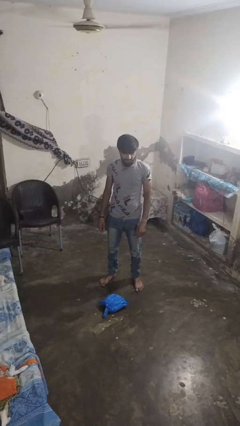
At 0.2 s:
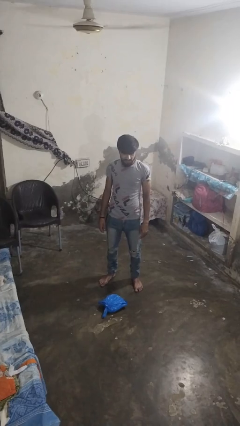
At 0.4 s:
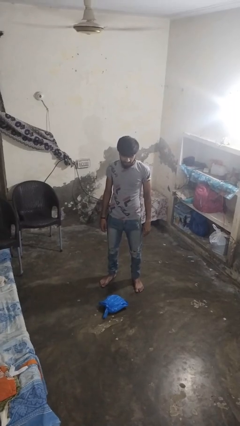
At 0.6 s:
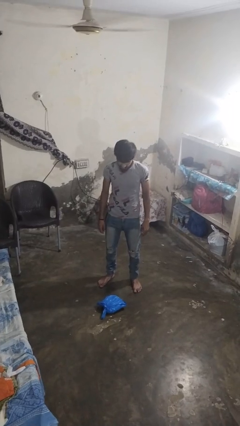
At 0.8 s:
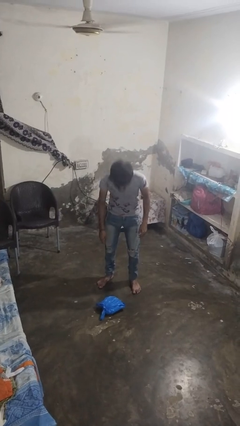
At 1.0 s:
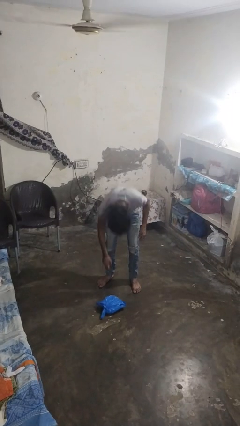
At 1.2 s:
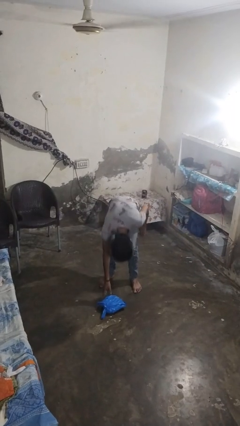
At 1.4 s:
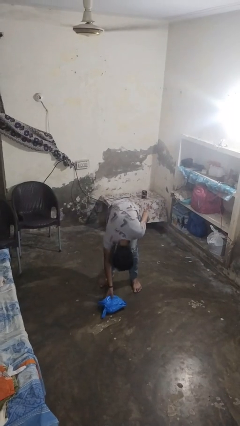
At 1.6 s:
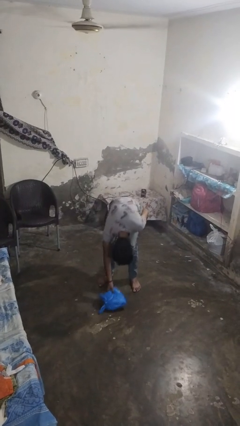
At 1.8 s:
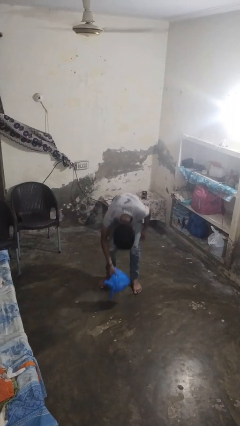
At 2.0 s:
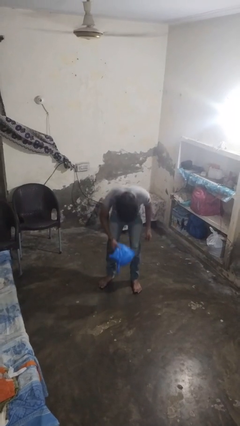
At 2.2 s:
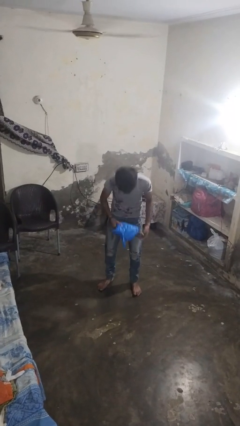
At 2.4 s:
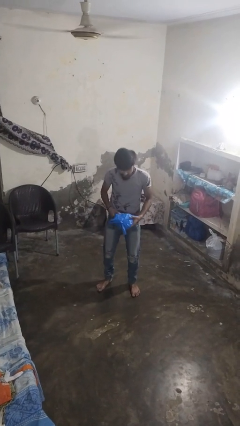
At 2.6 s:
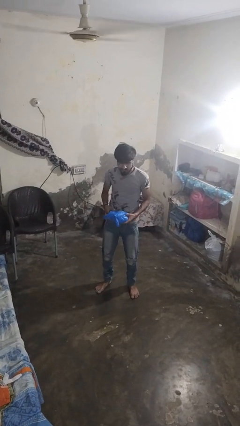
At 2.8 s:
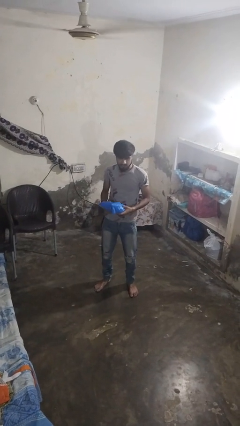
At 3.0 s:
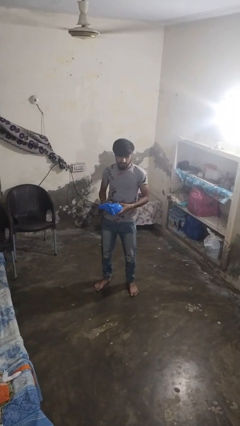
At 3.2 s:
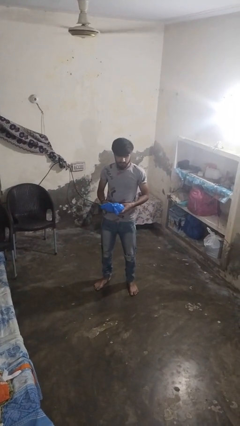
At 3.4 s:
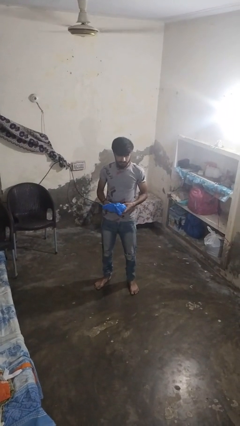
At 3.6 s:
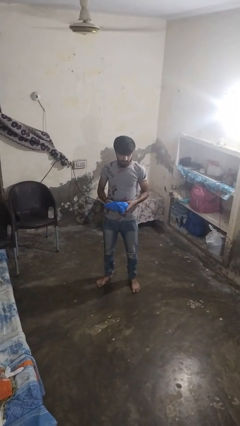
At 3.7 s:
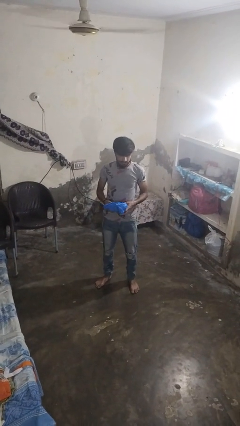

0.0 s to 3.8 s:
person picks up object from floor

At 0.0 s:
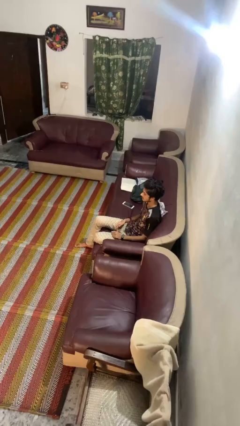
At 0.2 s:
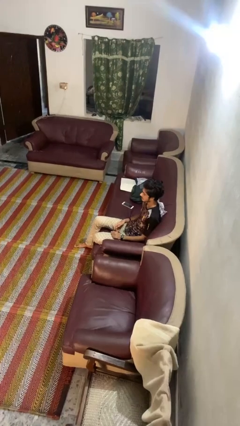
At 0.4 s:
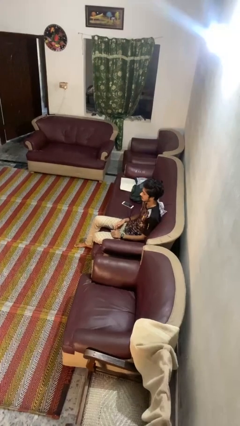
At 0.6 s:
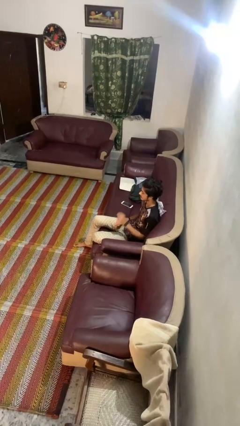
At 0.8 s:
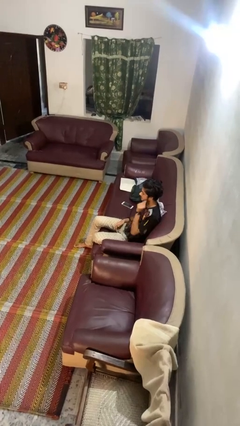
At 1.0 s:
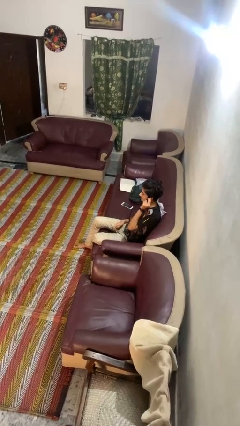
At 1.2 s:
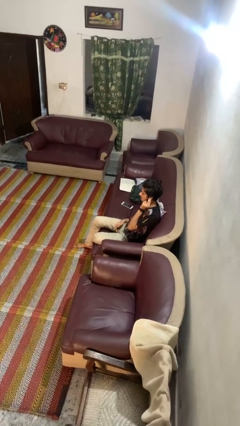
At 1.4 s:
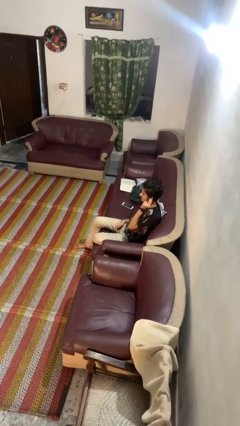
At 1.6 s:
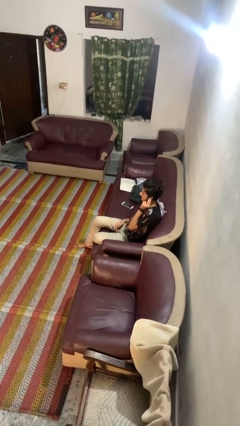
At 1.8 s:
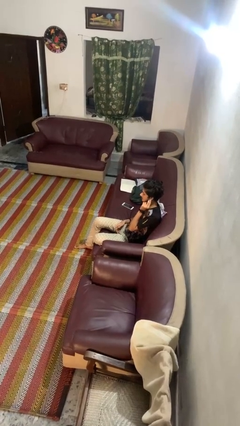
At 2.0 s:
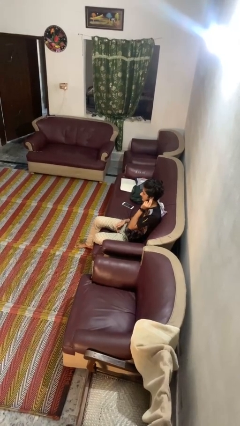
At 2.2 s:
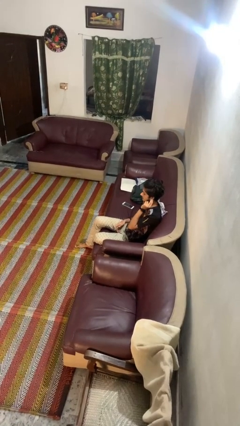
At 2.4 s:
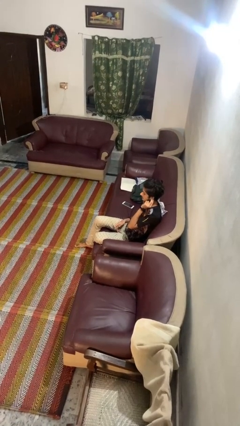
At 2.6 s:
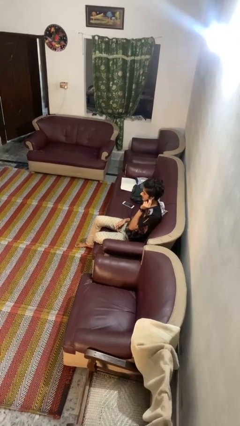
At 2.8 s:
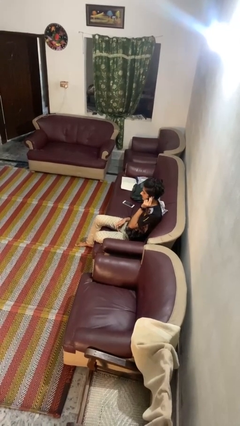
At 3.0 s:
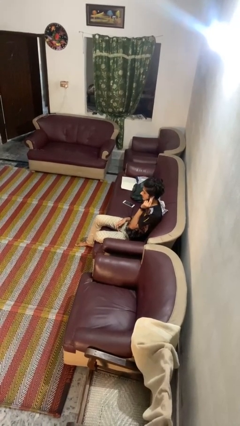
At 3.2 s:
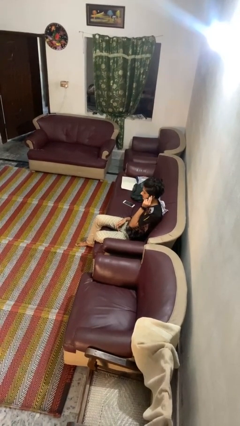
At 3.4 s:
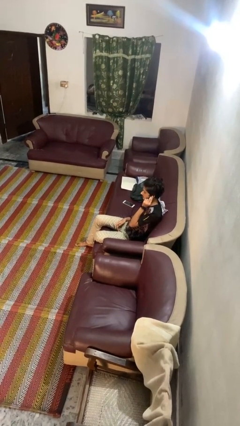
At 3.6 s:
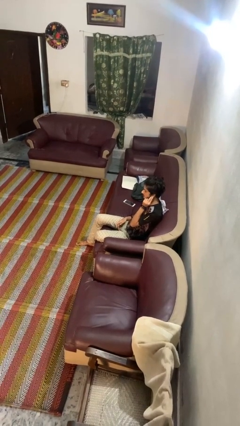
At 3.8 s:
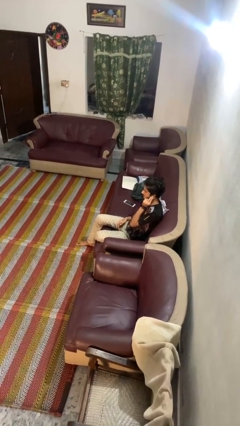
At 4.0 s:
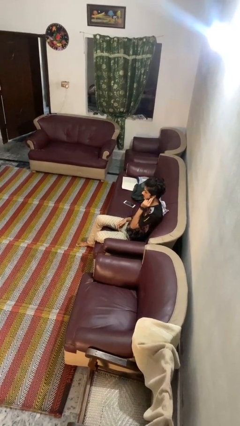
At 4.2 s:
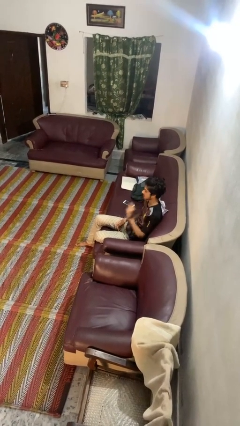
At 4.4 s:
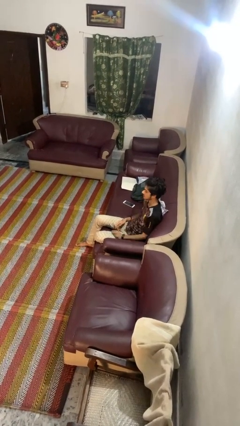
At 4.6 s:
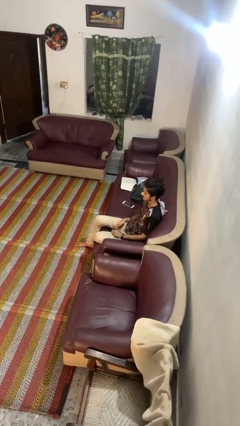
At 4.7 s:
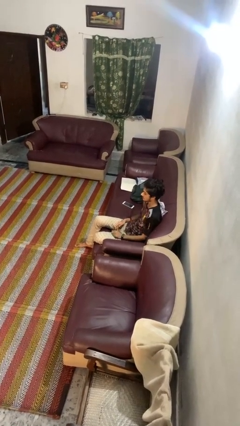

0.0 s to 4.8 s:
person touches earlobe

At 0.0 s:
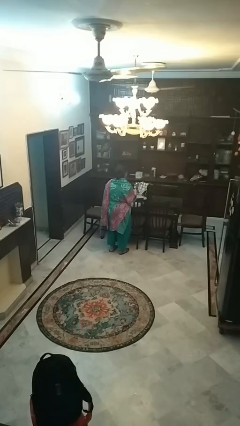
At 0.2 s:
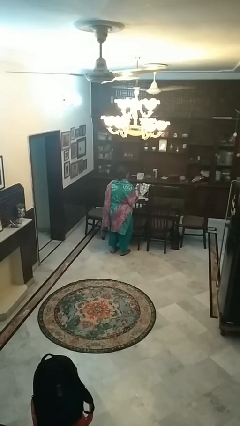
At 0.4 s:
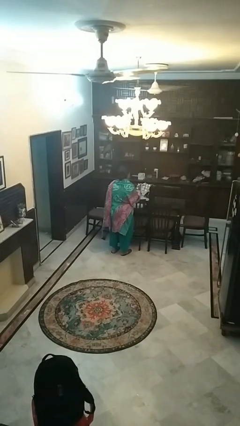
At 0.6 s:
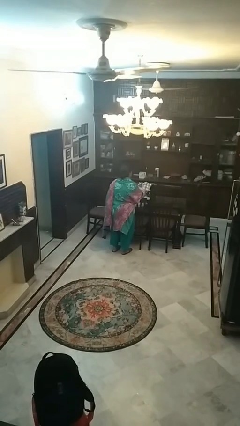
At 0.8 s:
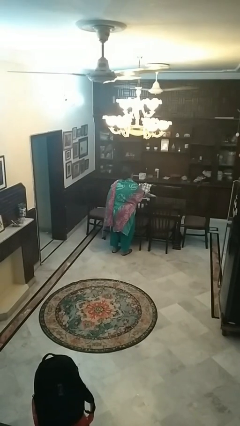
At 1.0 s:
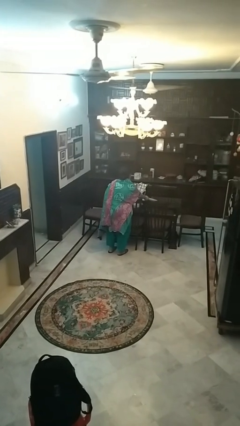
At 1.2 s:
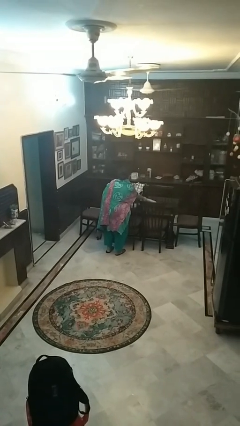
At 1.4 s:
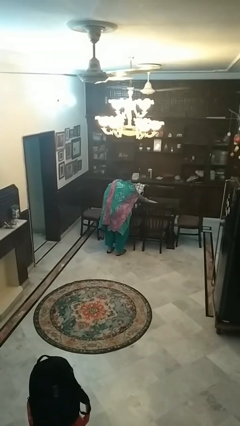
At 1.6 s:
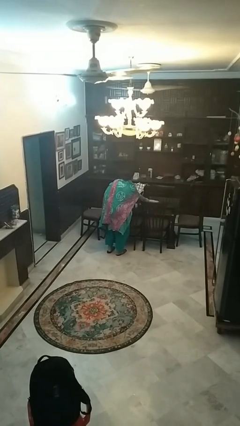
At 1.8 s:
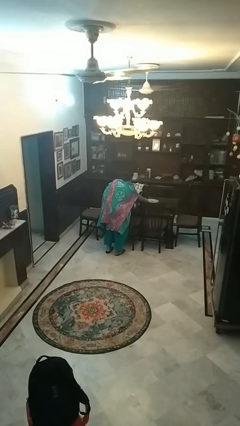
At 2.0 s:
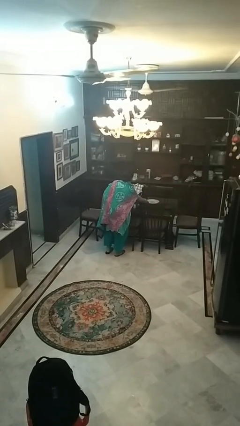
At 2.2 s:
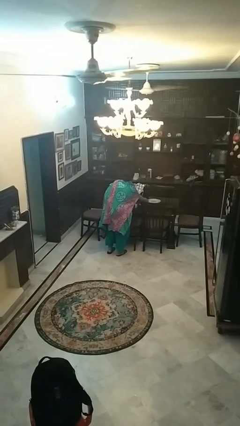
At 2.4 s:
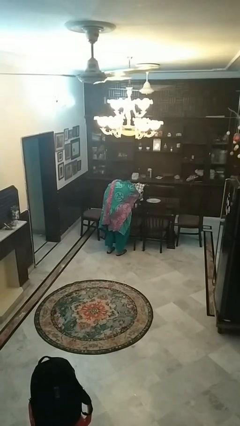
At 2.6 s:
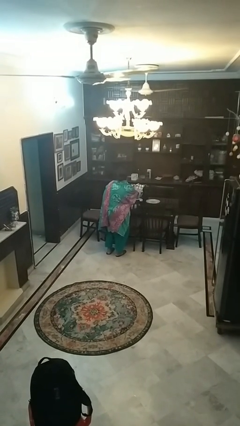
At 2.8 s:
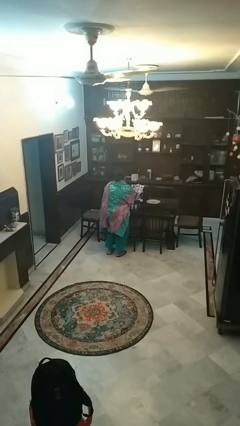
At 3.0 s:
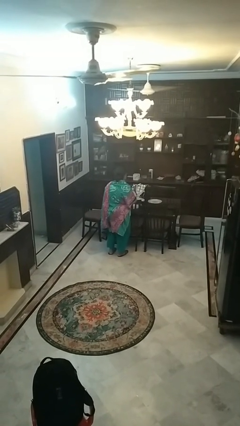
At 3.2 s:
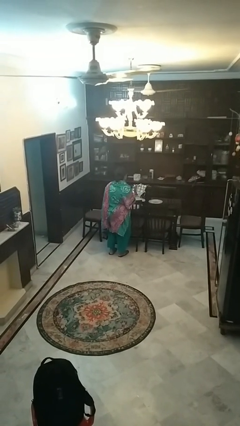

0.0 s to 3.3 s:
person sets table

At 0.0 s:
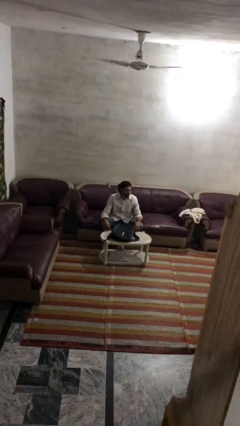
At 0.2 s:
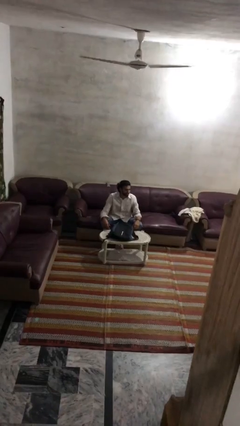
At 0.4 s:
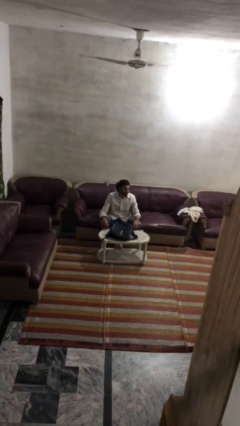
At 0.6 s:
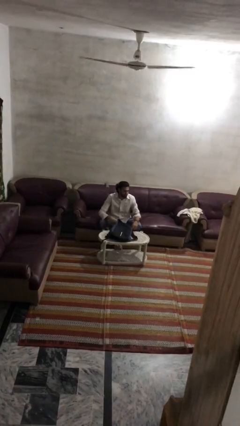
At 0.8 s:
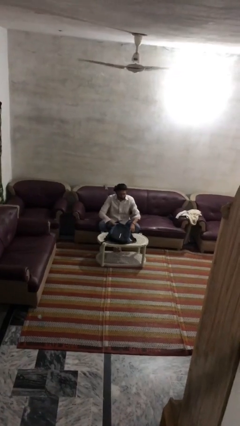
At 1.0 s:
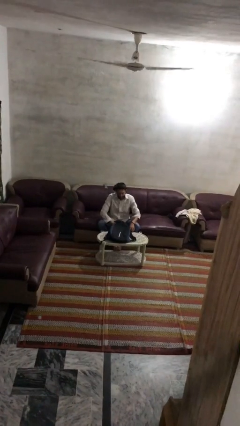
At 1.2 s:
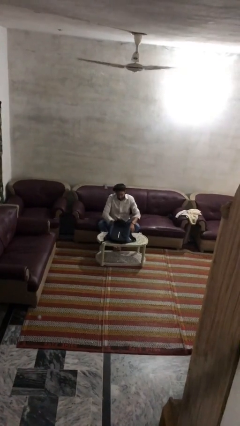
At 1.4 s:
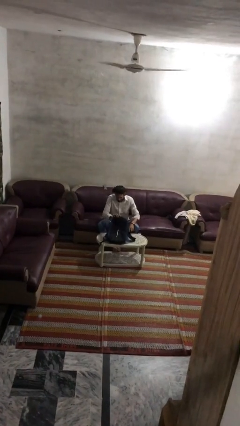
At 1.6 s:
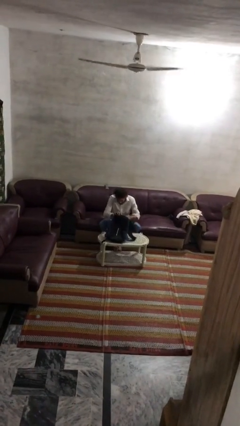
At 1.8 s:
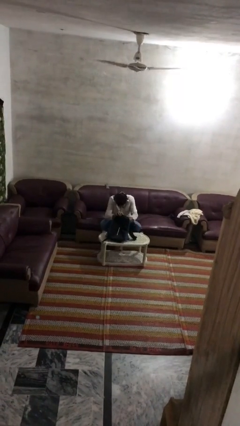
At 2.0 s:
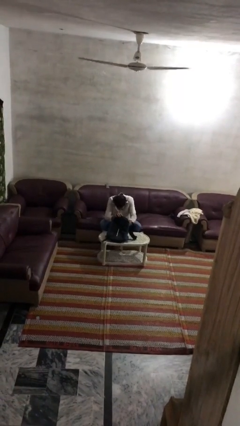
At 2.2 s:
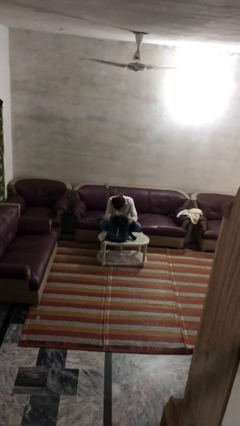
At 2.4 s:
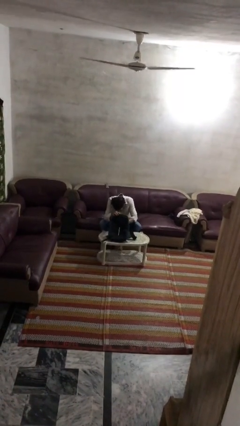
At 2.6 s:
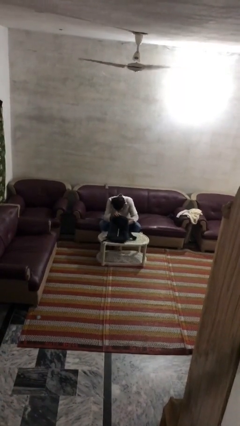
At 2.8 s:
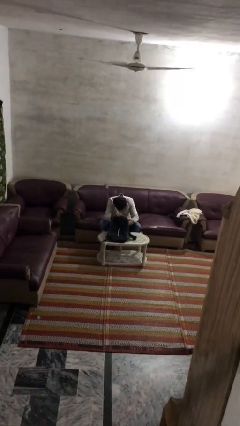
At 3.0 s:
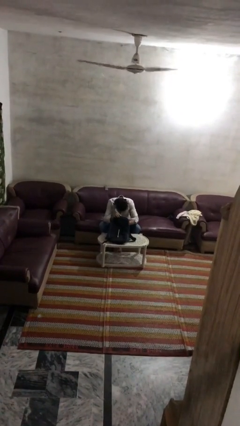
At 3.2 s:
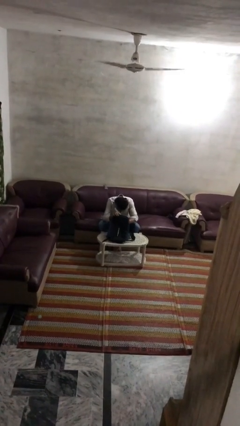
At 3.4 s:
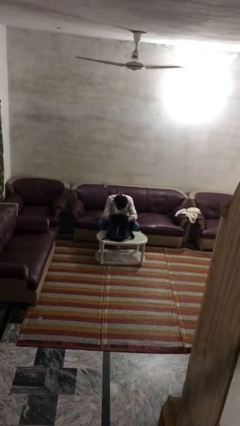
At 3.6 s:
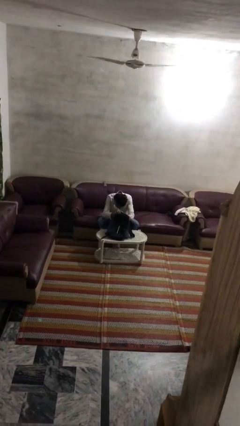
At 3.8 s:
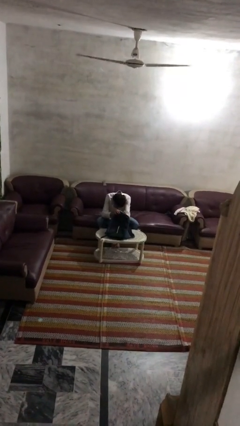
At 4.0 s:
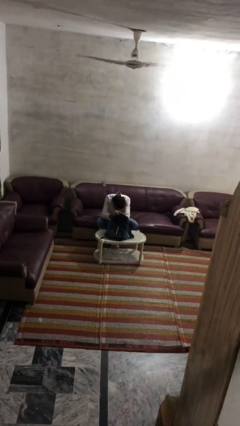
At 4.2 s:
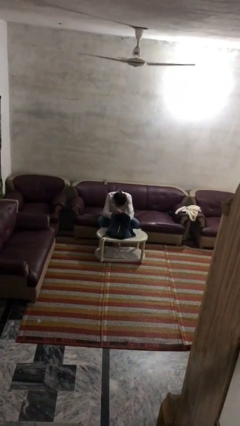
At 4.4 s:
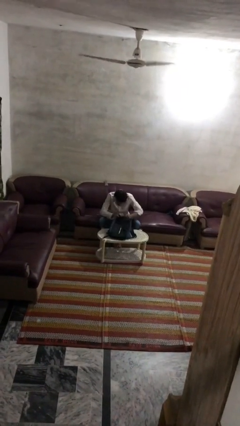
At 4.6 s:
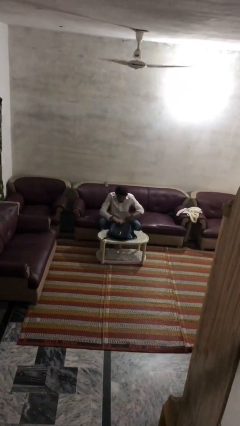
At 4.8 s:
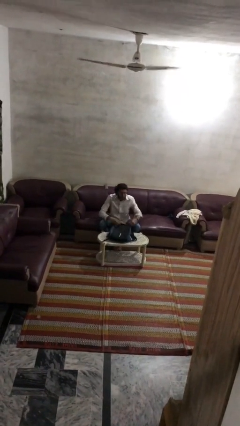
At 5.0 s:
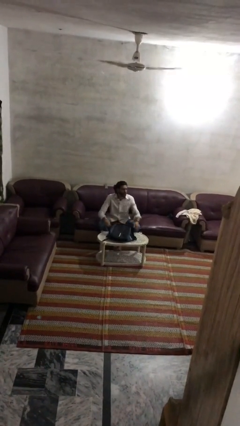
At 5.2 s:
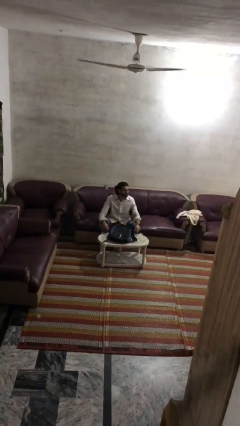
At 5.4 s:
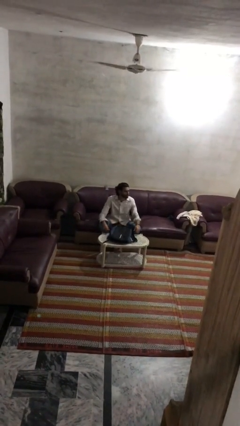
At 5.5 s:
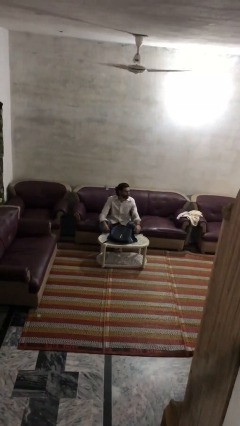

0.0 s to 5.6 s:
person searches in bag

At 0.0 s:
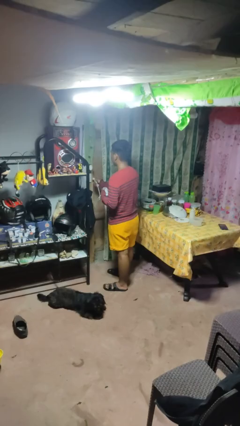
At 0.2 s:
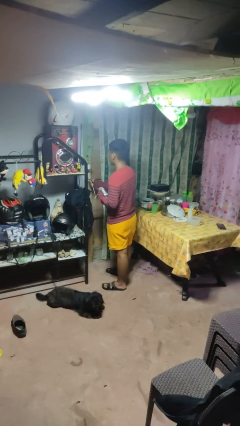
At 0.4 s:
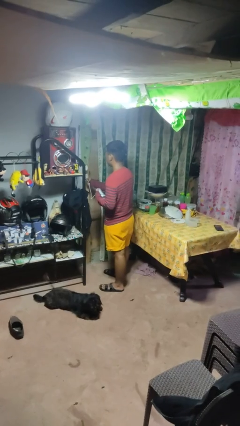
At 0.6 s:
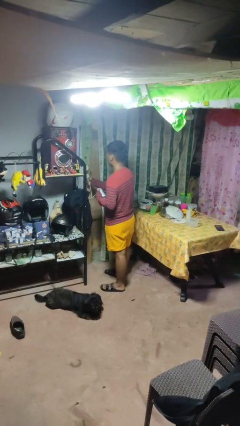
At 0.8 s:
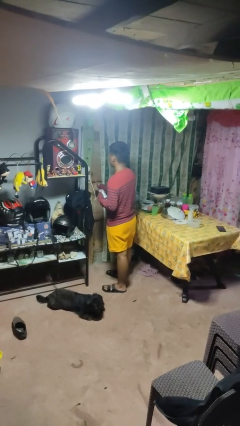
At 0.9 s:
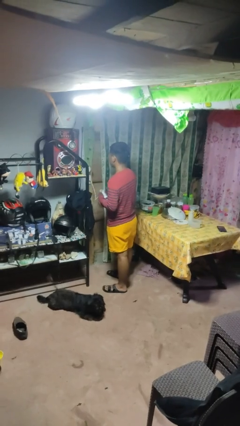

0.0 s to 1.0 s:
person plugs into electrical socket
